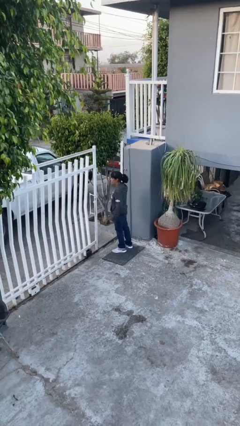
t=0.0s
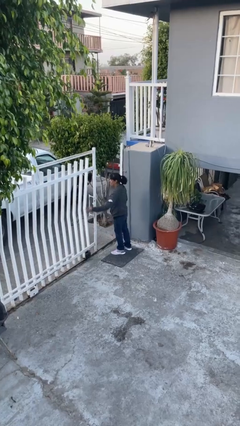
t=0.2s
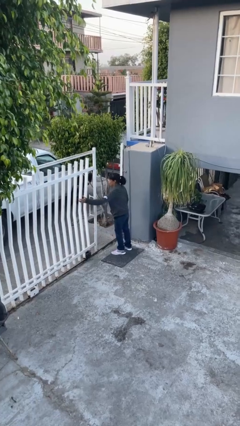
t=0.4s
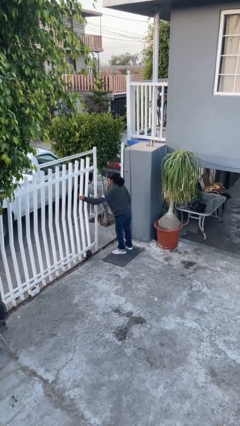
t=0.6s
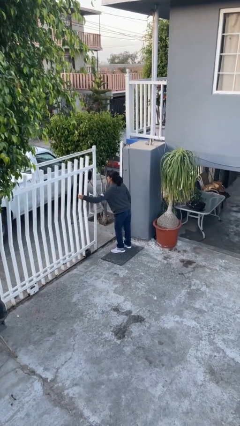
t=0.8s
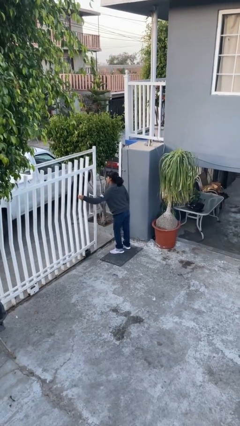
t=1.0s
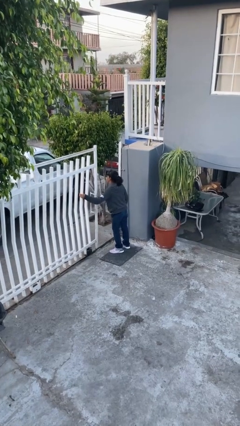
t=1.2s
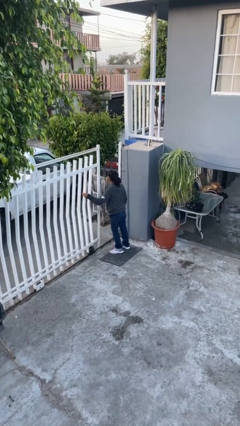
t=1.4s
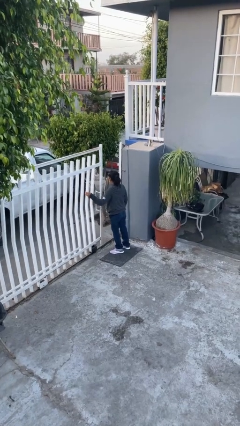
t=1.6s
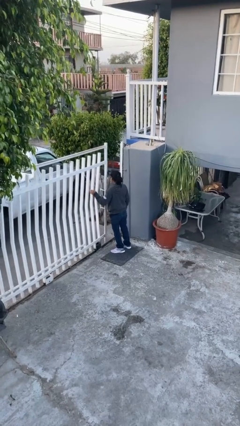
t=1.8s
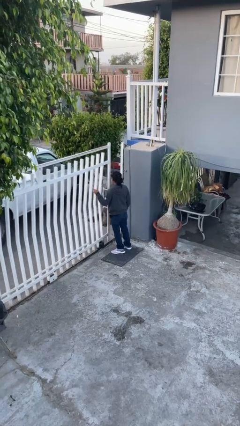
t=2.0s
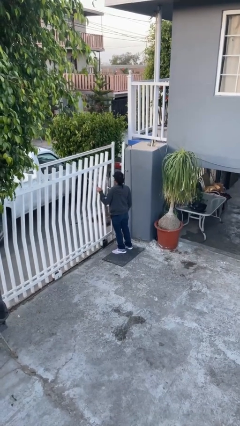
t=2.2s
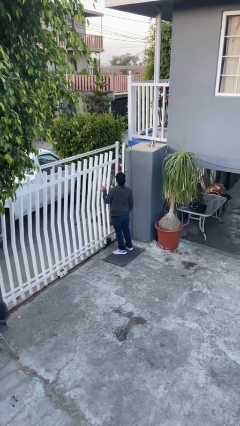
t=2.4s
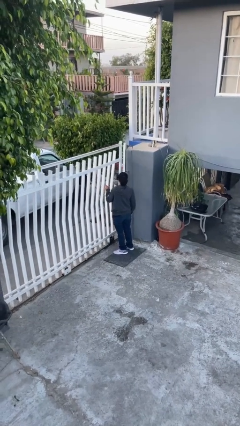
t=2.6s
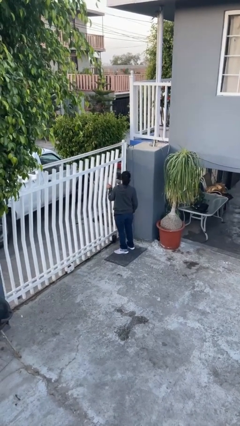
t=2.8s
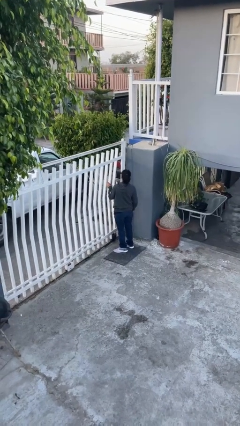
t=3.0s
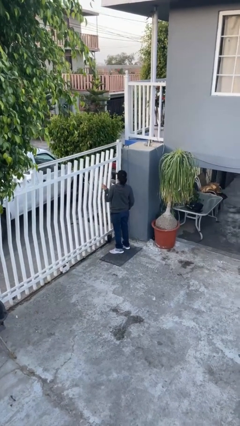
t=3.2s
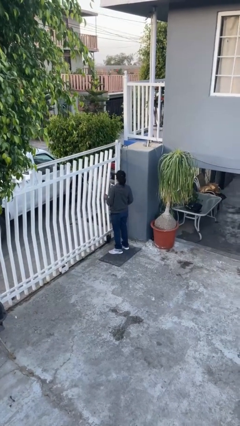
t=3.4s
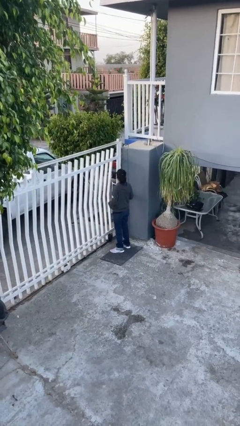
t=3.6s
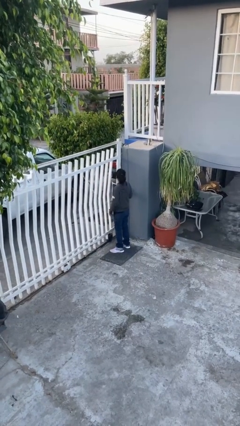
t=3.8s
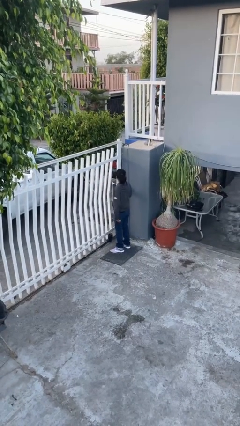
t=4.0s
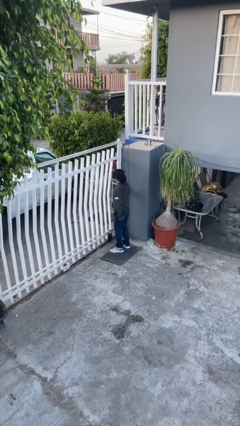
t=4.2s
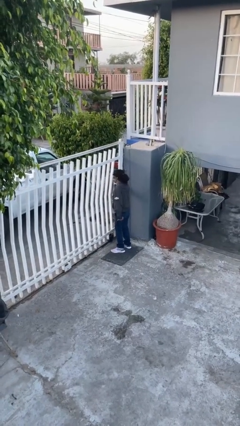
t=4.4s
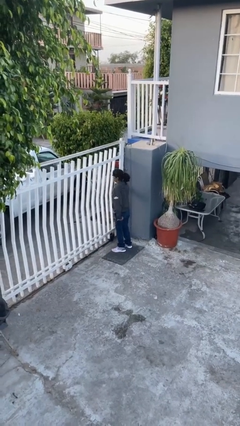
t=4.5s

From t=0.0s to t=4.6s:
person opens facility door

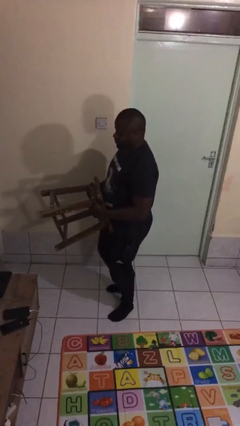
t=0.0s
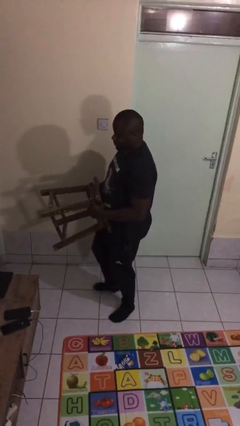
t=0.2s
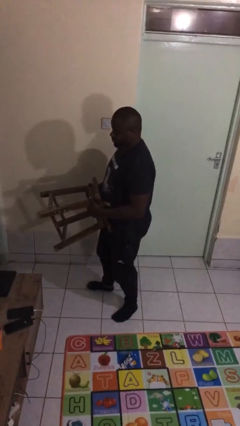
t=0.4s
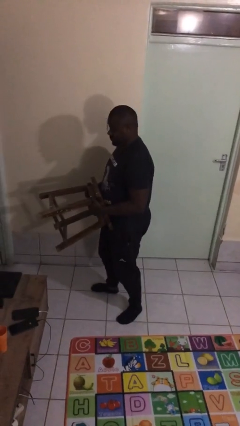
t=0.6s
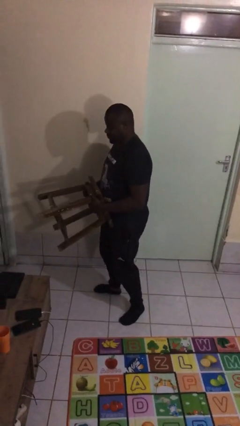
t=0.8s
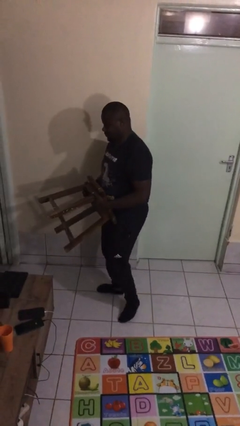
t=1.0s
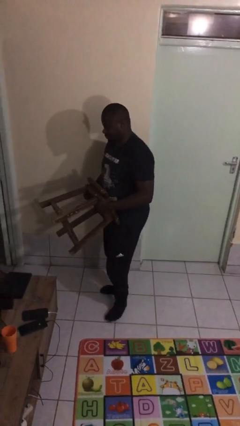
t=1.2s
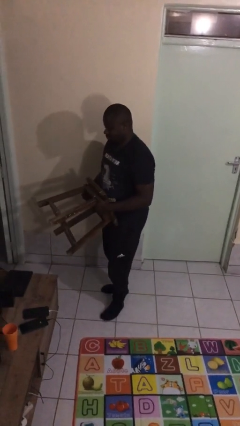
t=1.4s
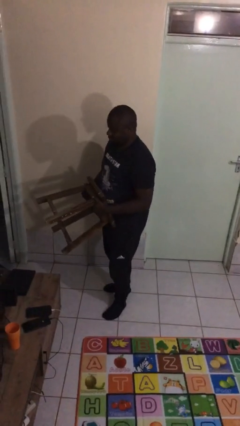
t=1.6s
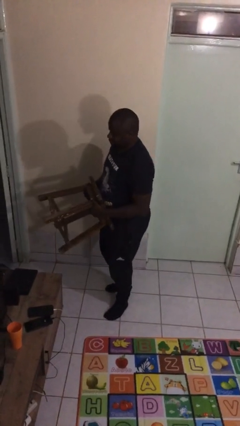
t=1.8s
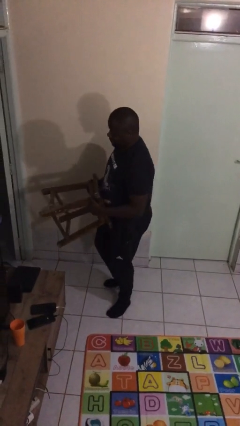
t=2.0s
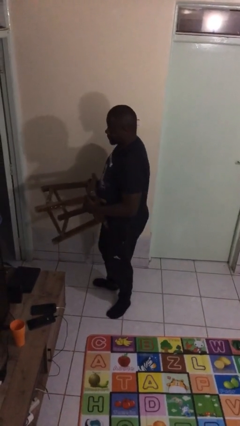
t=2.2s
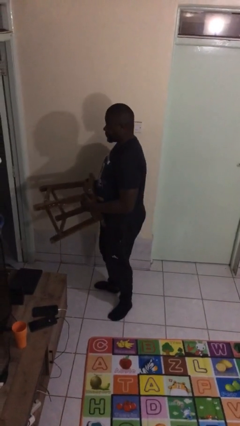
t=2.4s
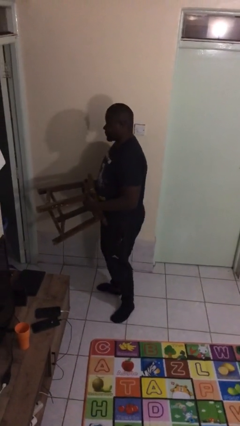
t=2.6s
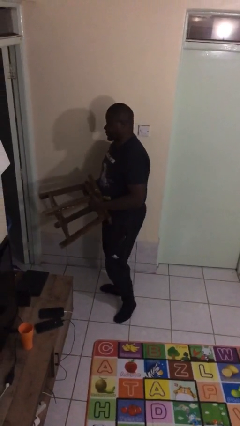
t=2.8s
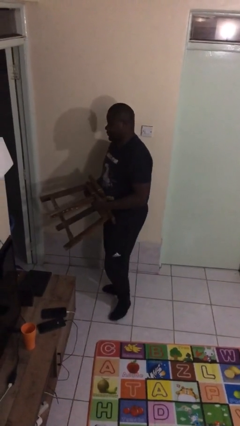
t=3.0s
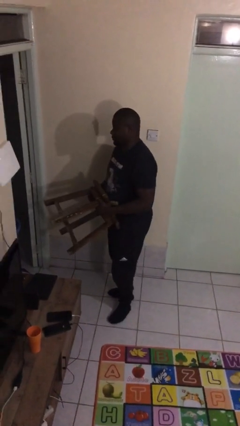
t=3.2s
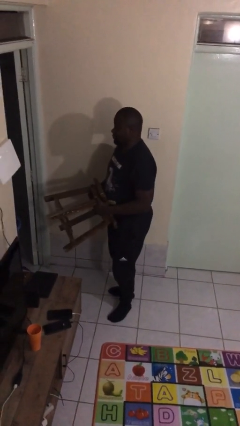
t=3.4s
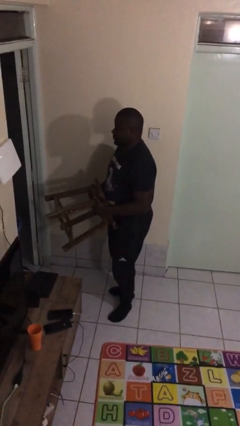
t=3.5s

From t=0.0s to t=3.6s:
person carries furniture

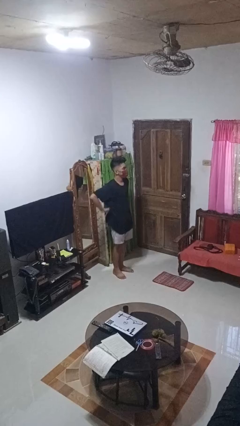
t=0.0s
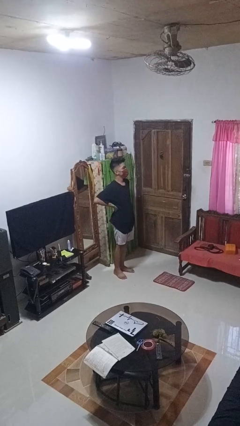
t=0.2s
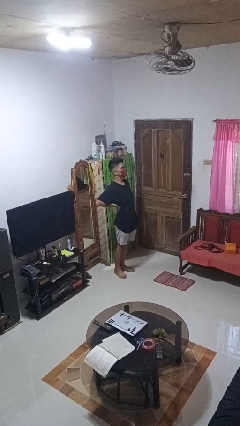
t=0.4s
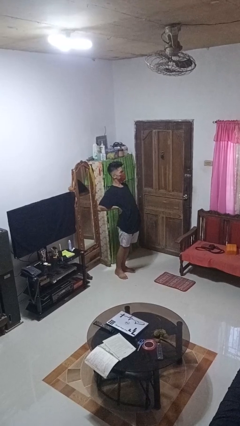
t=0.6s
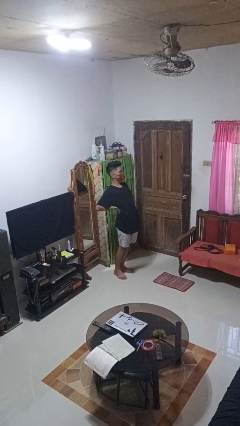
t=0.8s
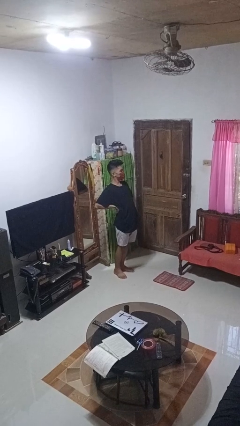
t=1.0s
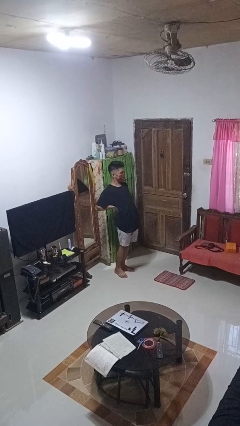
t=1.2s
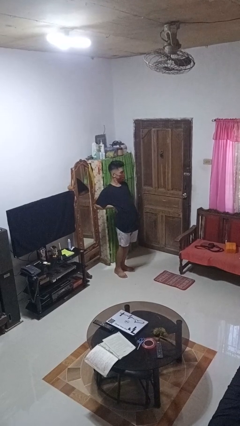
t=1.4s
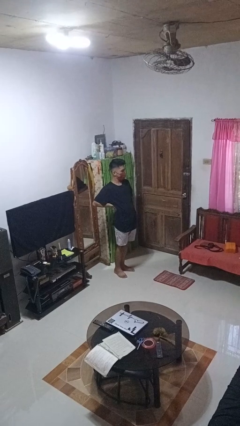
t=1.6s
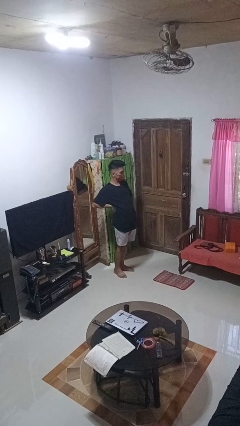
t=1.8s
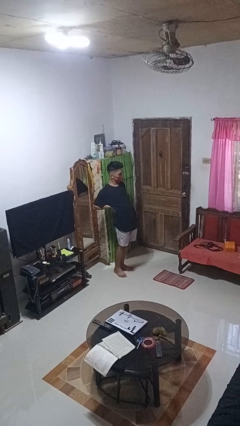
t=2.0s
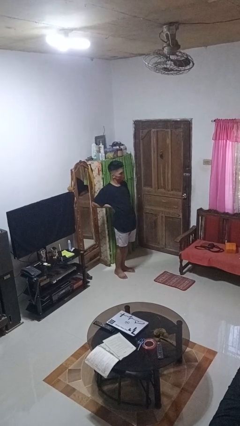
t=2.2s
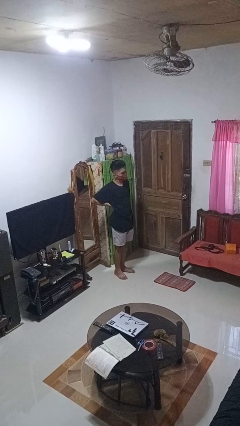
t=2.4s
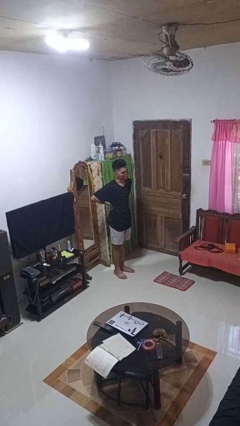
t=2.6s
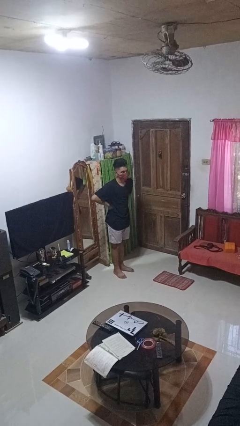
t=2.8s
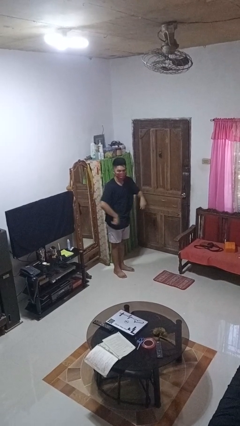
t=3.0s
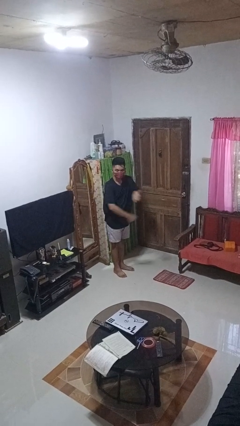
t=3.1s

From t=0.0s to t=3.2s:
person stretches back

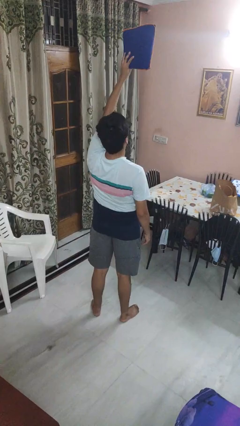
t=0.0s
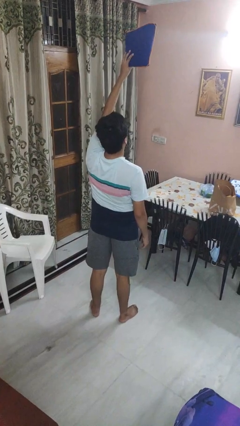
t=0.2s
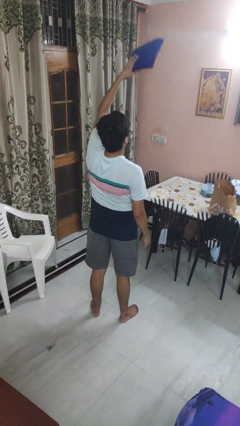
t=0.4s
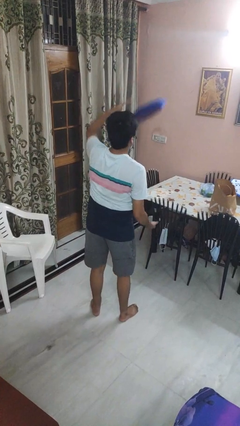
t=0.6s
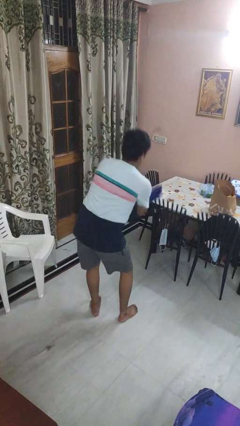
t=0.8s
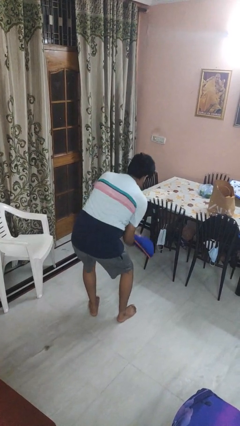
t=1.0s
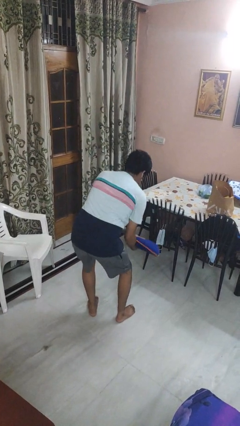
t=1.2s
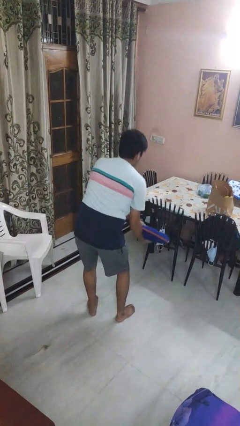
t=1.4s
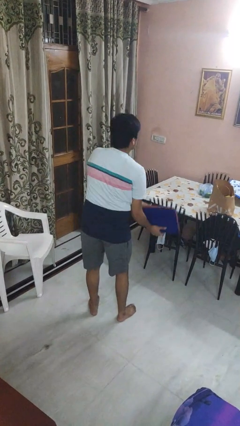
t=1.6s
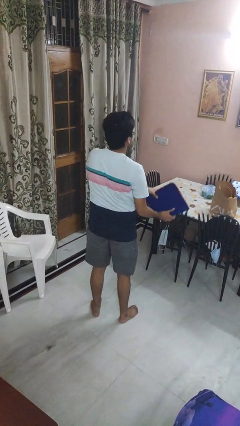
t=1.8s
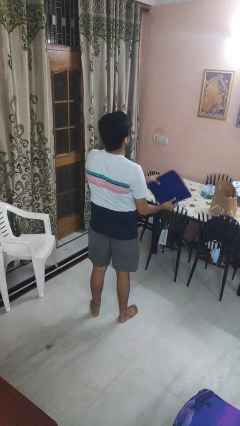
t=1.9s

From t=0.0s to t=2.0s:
person catches dropped object

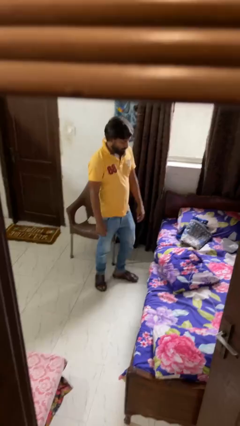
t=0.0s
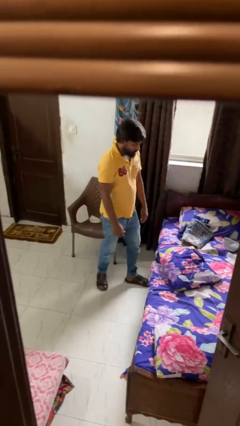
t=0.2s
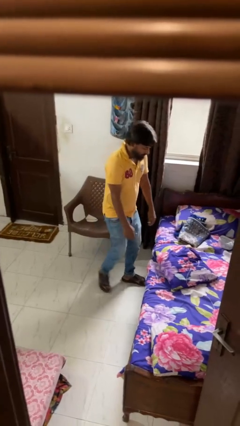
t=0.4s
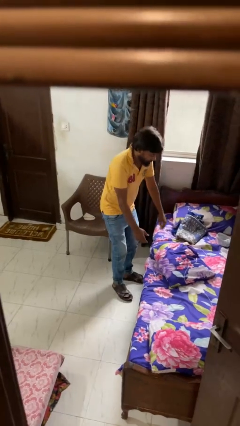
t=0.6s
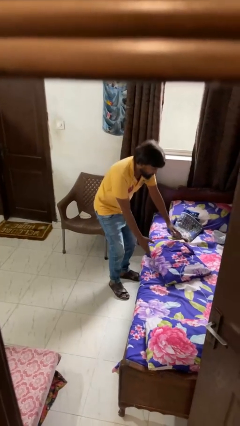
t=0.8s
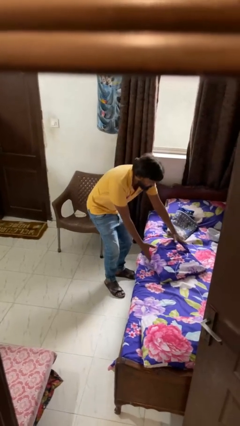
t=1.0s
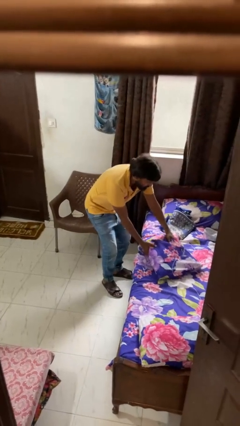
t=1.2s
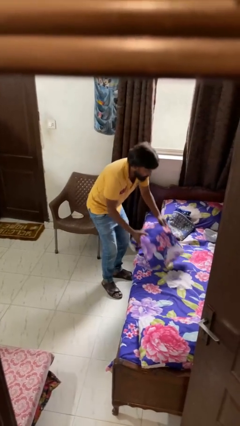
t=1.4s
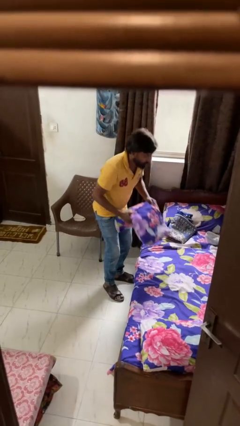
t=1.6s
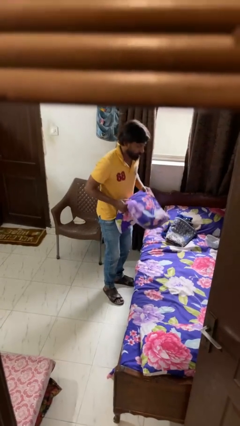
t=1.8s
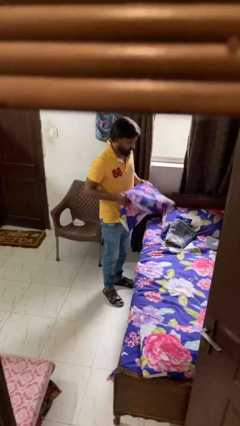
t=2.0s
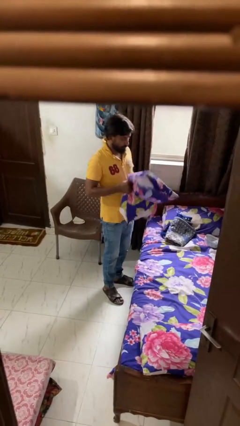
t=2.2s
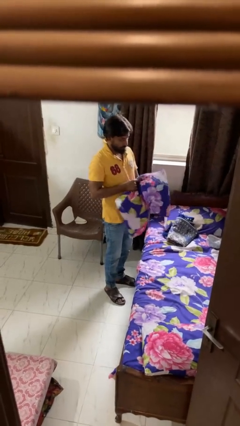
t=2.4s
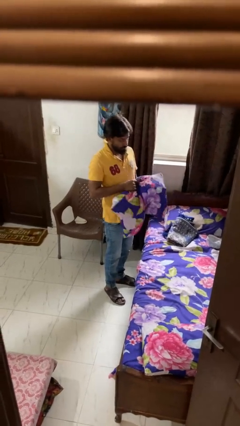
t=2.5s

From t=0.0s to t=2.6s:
person picks up object from bed

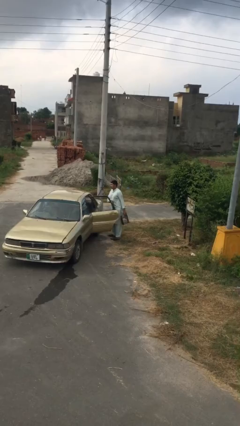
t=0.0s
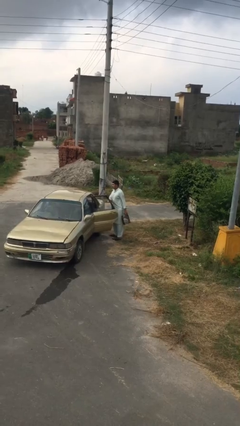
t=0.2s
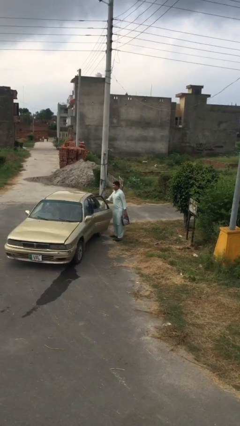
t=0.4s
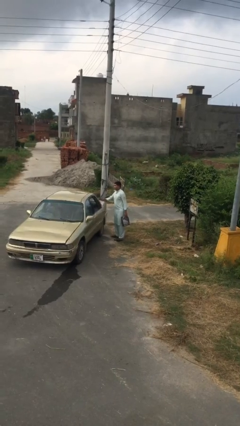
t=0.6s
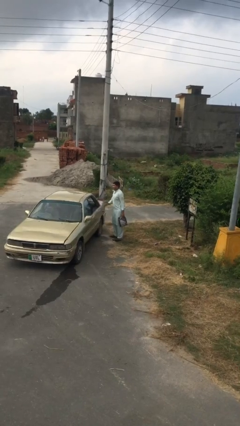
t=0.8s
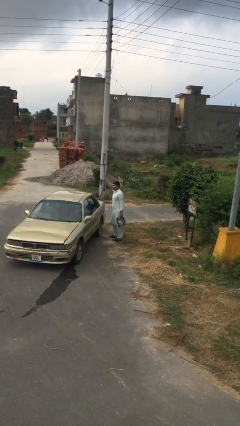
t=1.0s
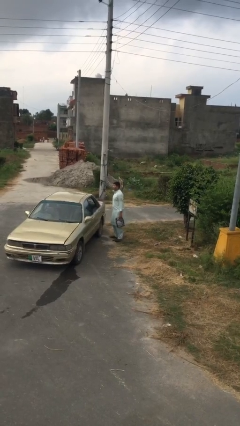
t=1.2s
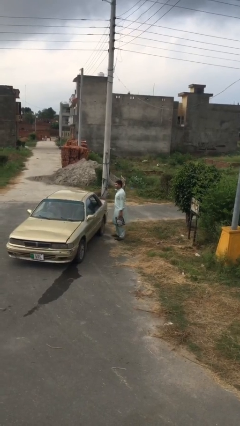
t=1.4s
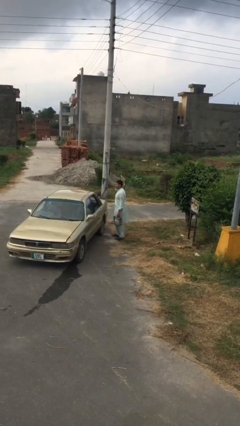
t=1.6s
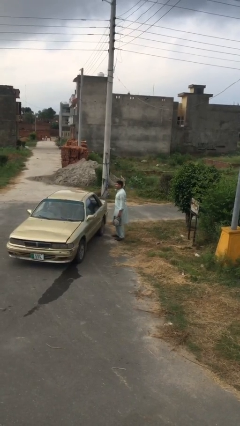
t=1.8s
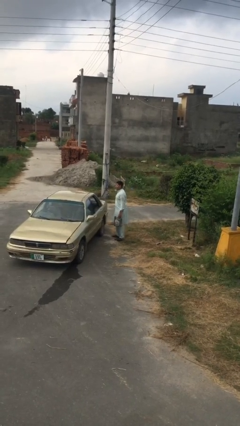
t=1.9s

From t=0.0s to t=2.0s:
person closes car door
